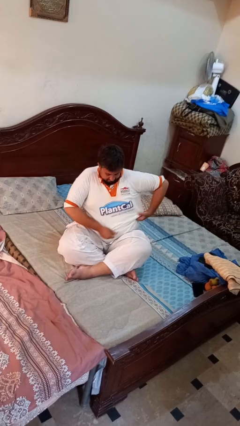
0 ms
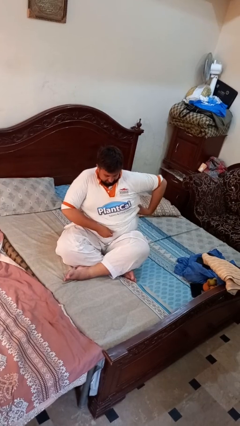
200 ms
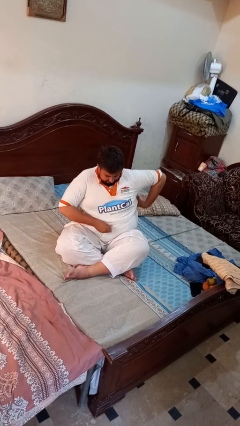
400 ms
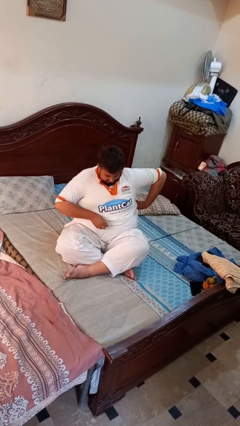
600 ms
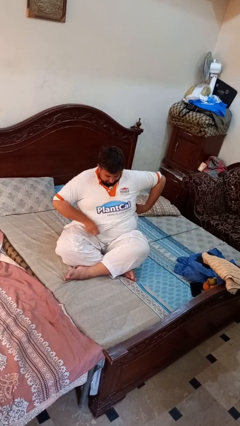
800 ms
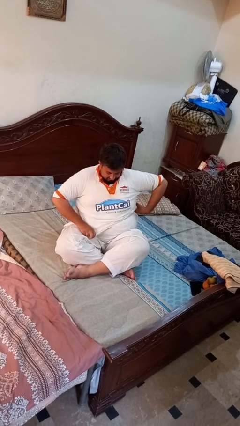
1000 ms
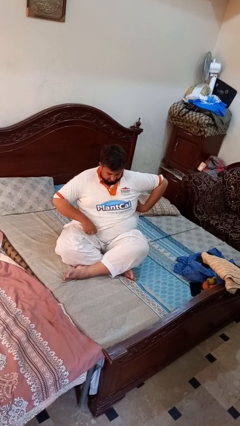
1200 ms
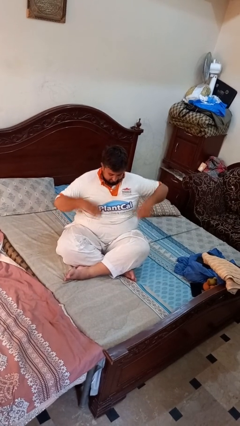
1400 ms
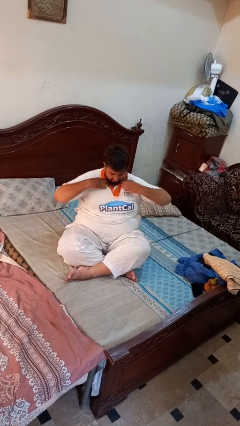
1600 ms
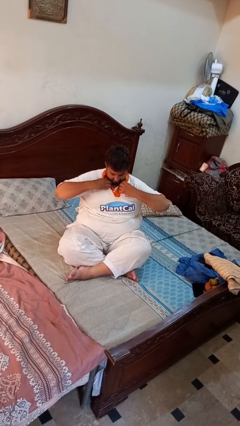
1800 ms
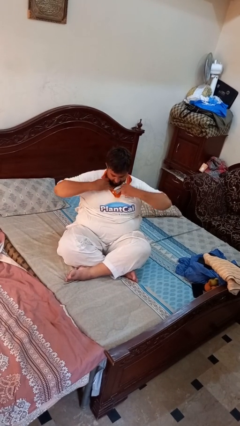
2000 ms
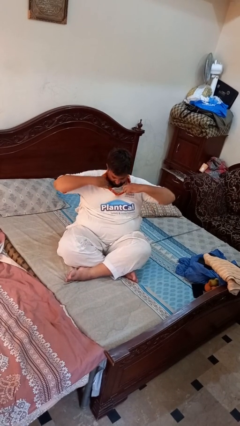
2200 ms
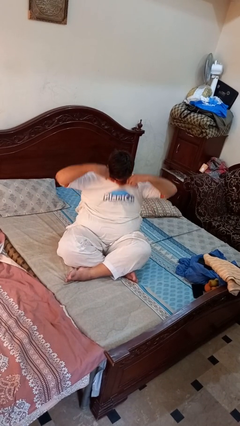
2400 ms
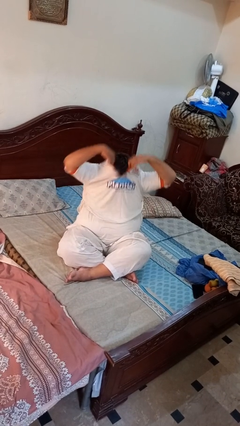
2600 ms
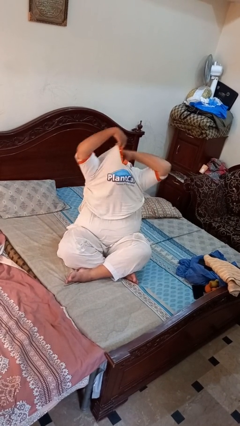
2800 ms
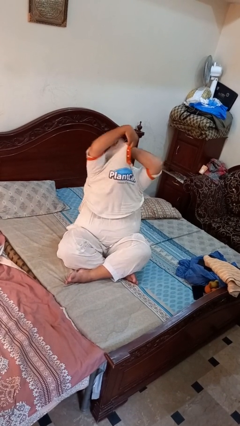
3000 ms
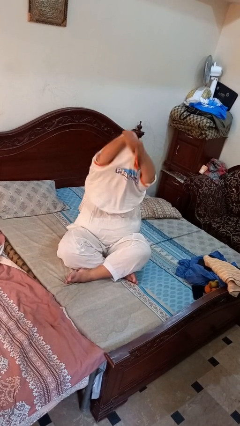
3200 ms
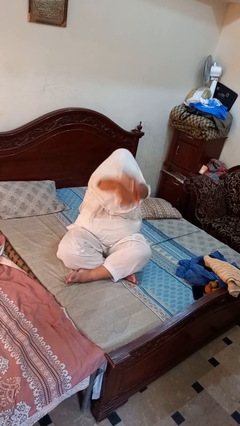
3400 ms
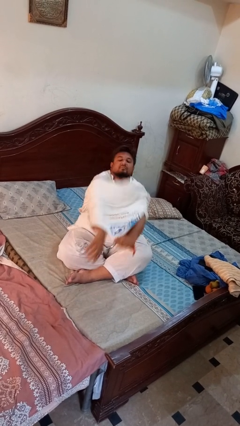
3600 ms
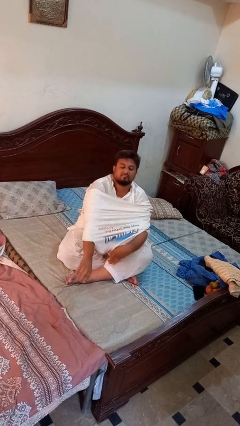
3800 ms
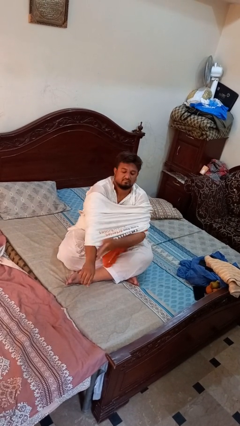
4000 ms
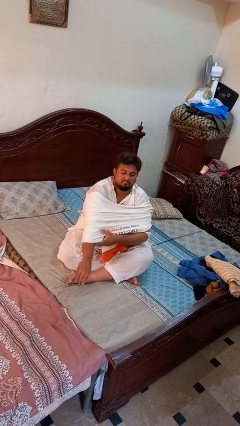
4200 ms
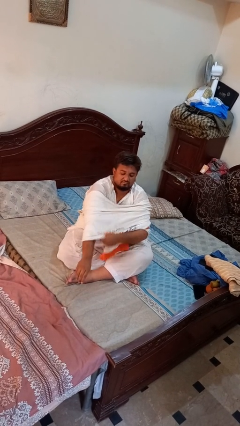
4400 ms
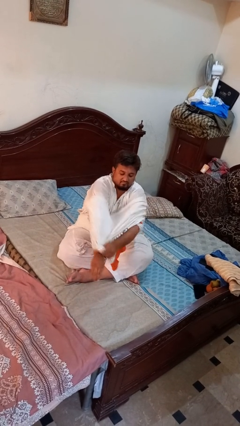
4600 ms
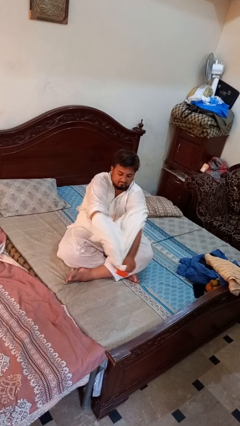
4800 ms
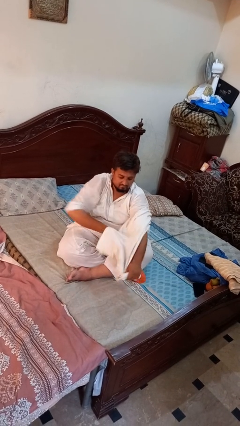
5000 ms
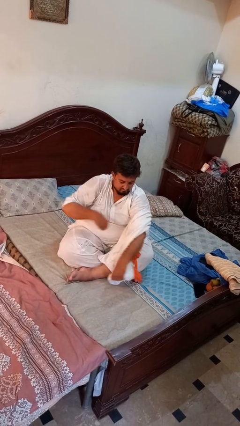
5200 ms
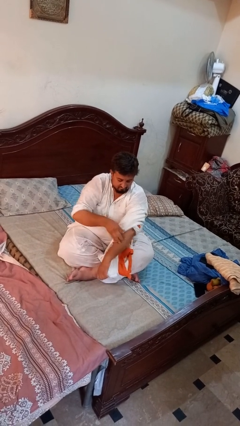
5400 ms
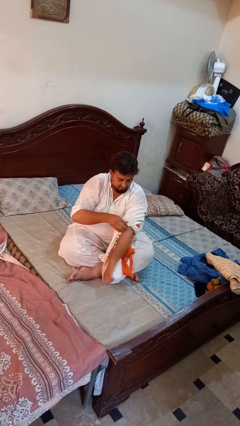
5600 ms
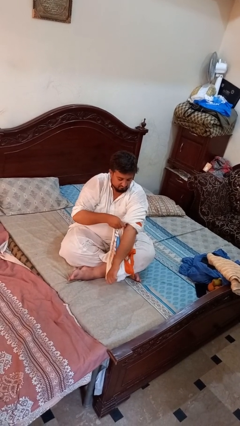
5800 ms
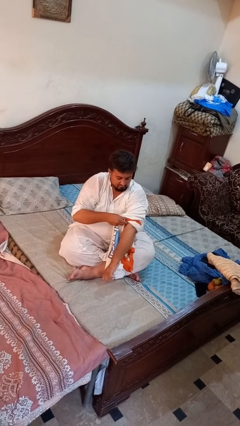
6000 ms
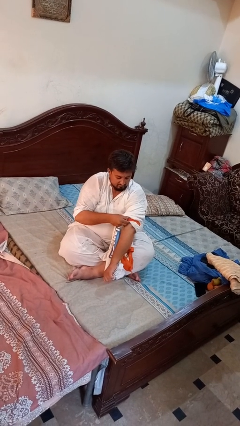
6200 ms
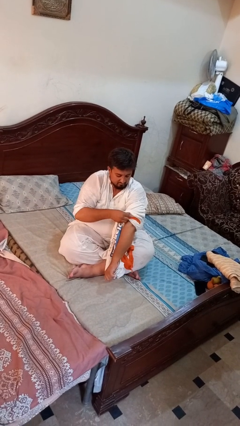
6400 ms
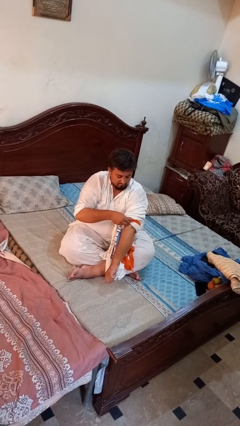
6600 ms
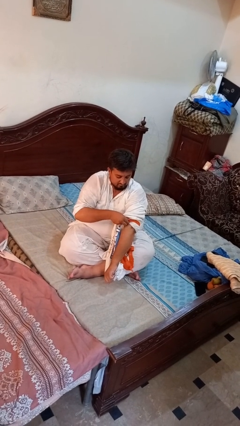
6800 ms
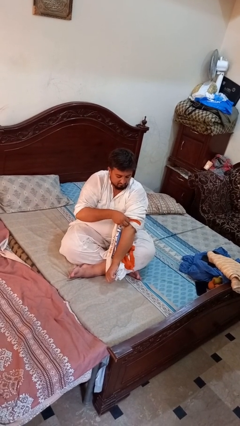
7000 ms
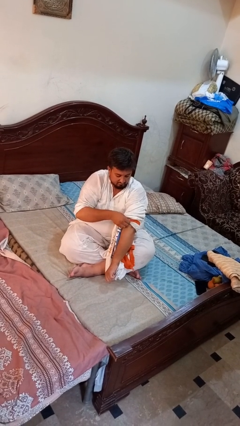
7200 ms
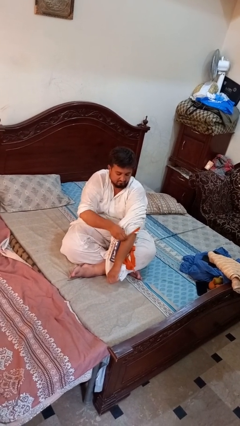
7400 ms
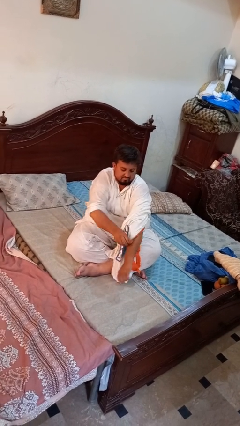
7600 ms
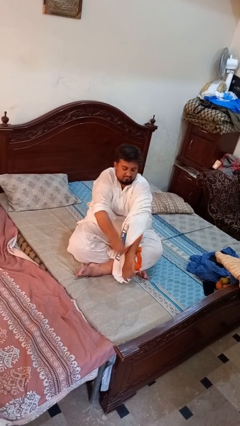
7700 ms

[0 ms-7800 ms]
person takes off shirt

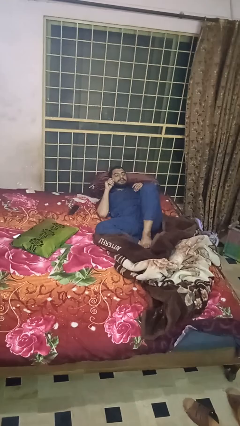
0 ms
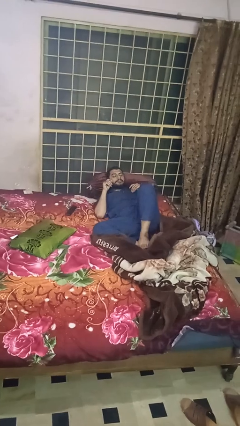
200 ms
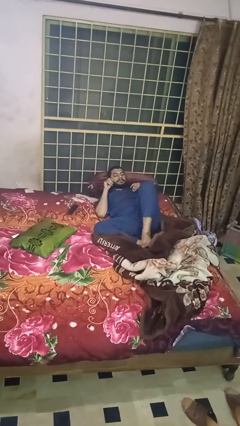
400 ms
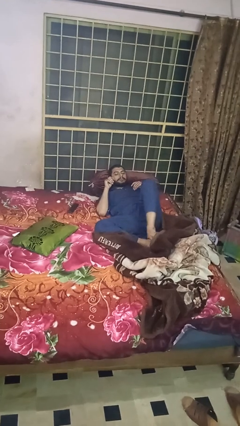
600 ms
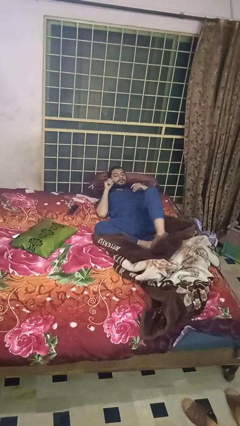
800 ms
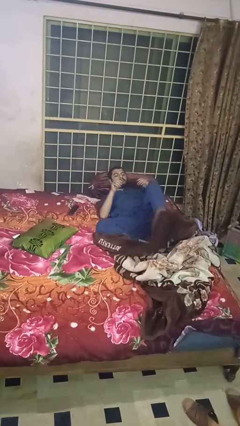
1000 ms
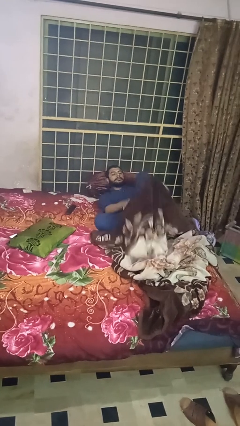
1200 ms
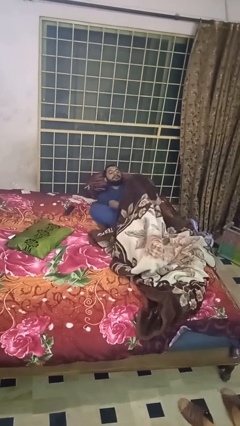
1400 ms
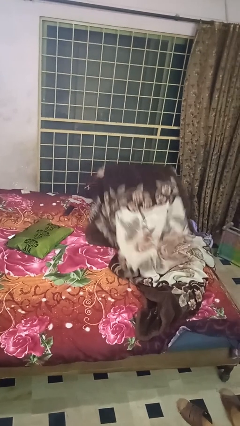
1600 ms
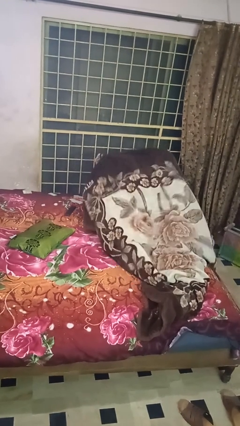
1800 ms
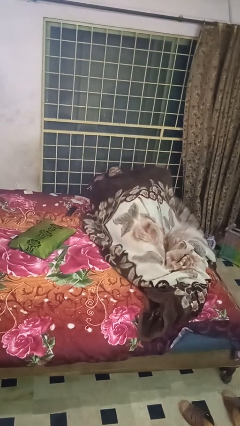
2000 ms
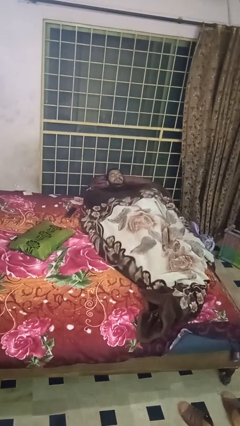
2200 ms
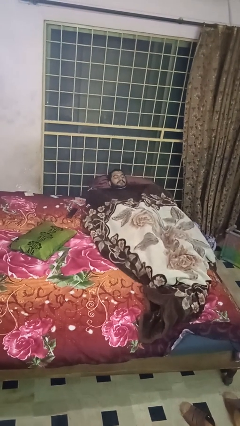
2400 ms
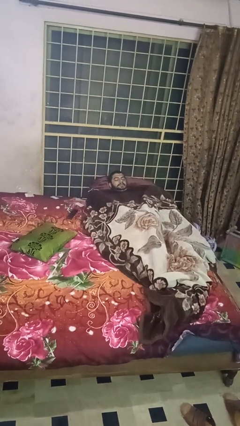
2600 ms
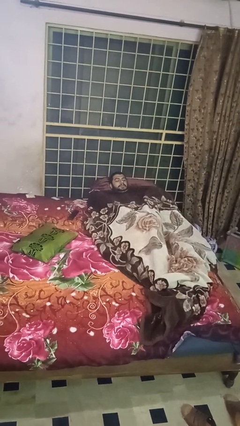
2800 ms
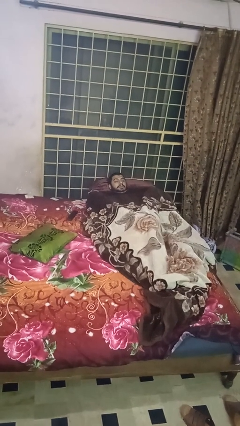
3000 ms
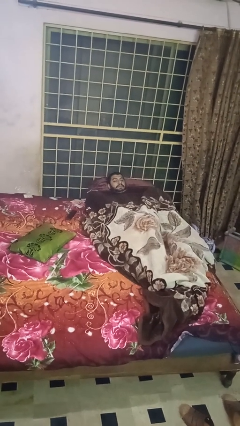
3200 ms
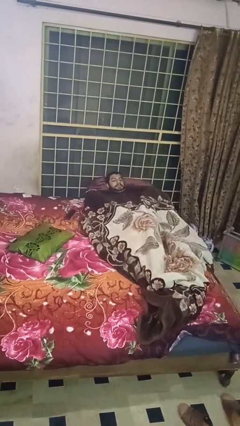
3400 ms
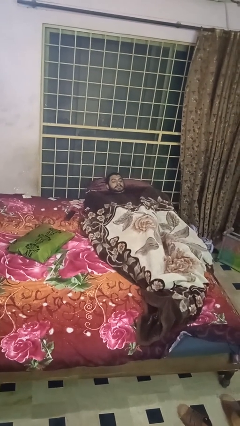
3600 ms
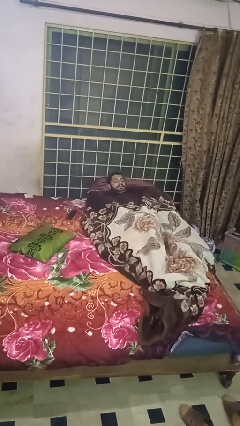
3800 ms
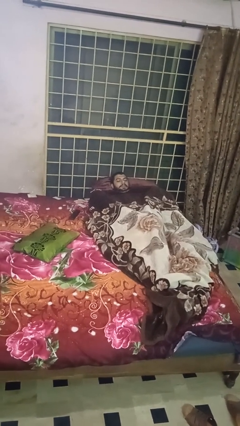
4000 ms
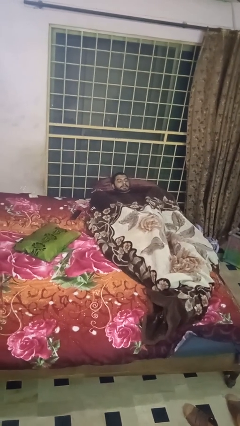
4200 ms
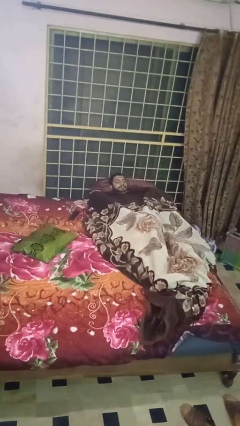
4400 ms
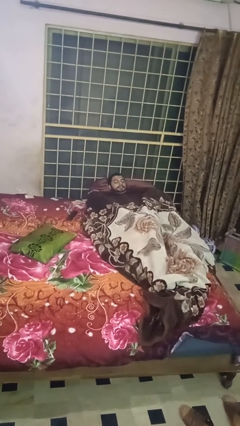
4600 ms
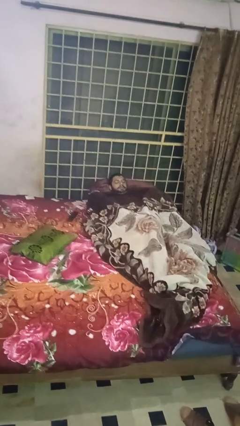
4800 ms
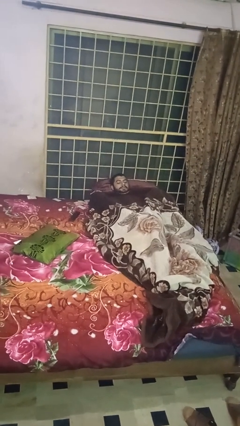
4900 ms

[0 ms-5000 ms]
person covers with blanket

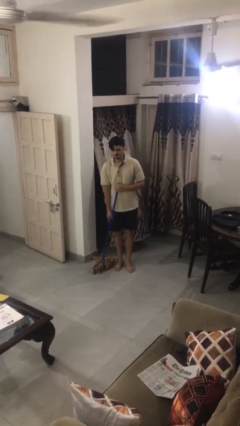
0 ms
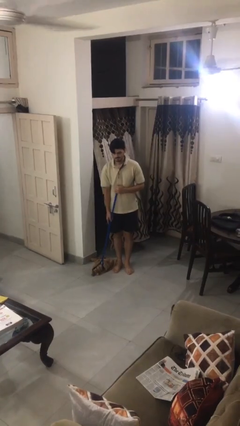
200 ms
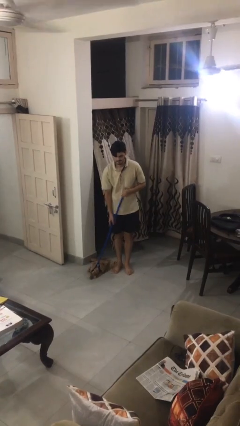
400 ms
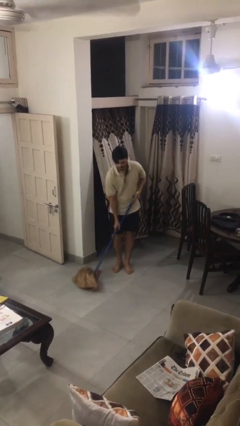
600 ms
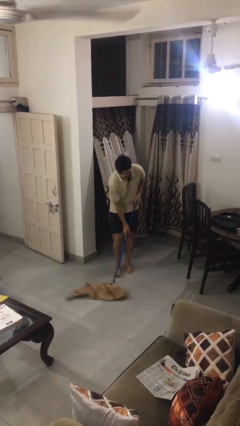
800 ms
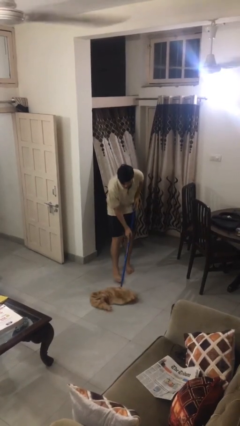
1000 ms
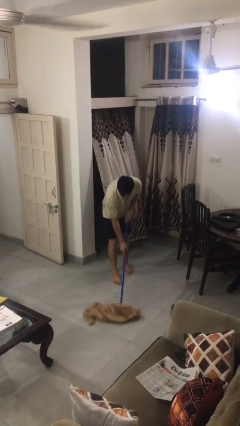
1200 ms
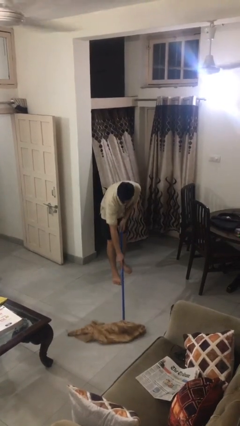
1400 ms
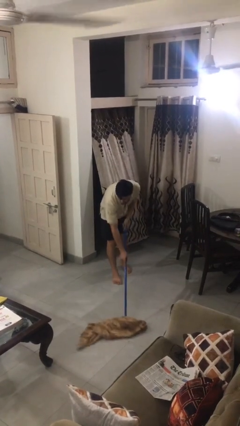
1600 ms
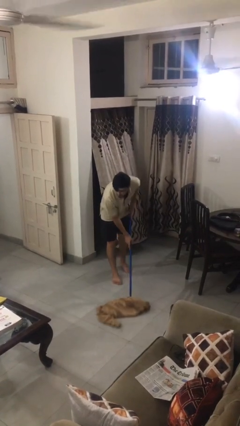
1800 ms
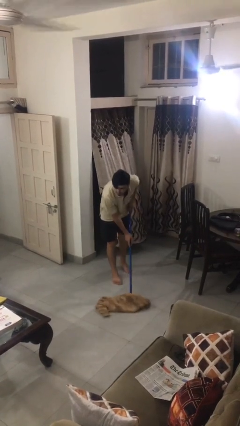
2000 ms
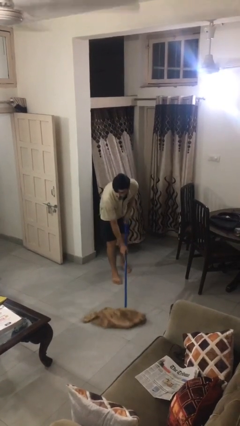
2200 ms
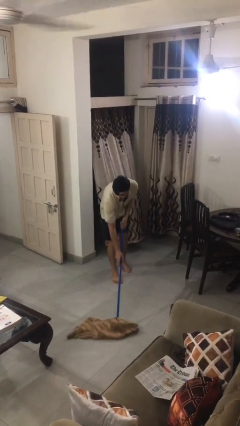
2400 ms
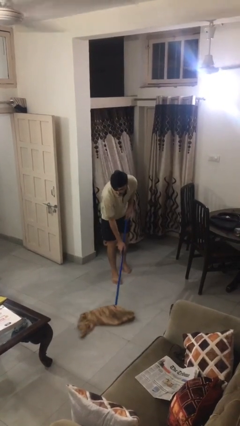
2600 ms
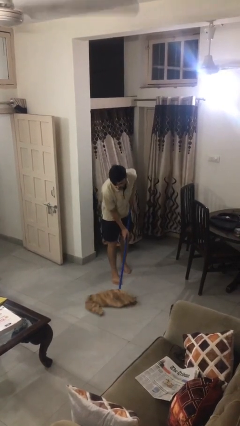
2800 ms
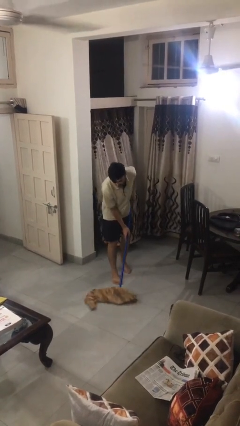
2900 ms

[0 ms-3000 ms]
person mops

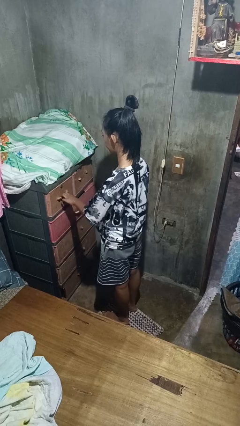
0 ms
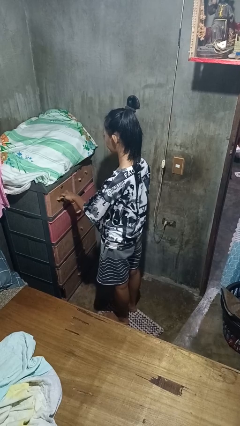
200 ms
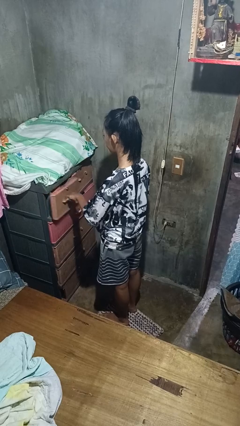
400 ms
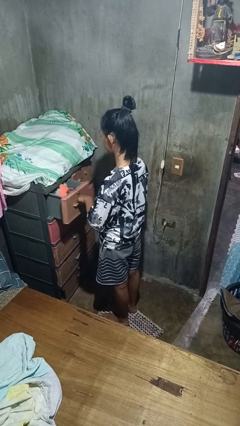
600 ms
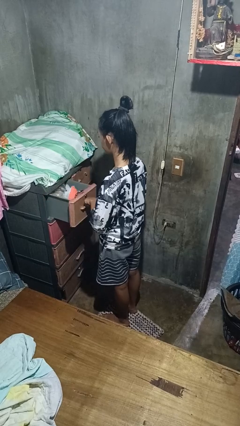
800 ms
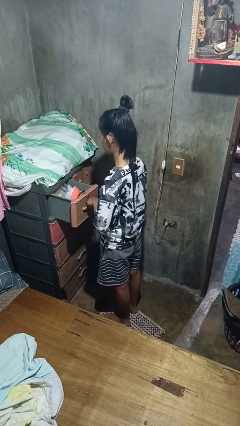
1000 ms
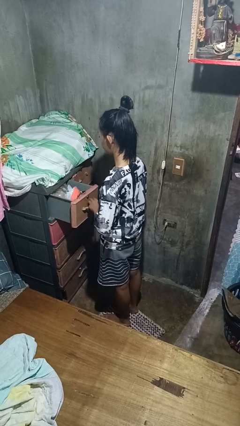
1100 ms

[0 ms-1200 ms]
person opens dresser drawer

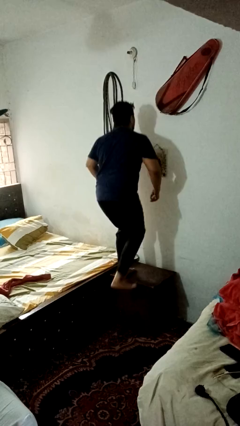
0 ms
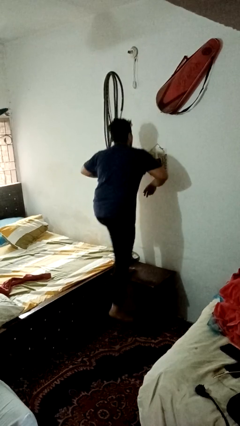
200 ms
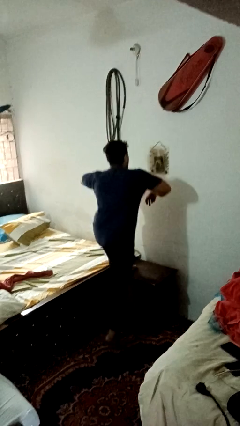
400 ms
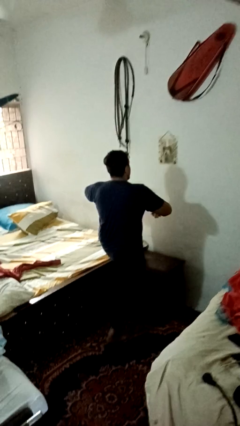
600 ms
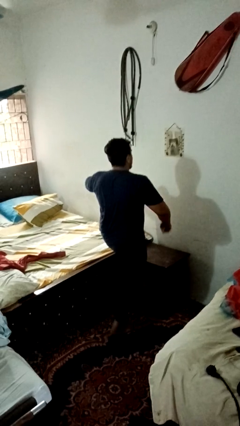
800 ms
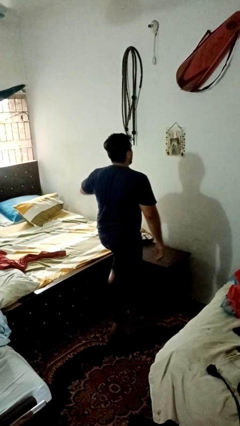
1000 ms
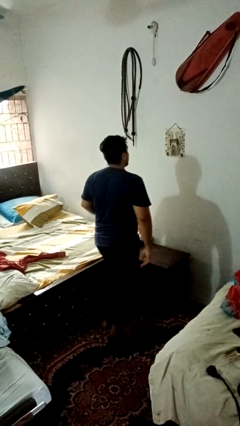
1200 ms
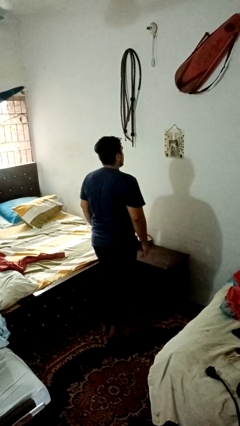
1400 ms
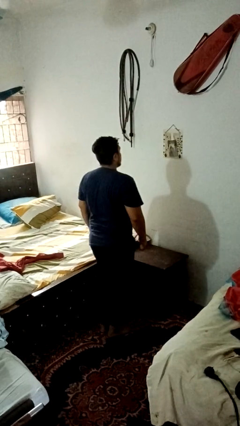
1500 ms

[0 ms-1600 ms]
person climbs off table
